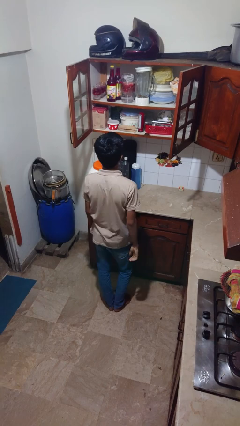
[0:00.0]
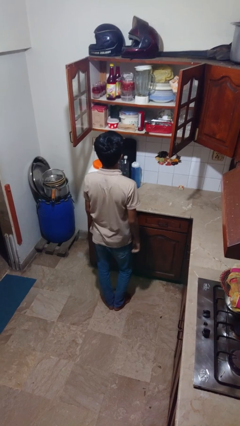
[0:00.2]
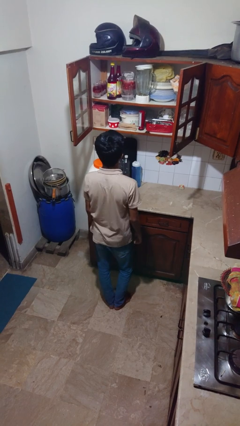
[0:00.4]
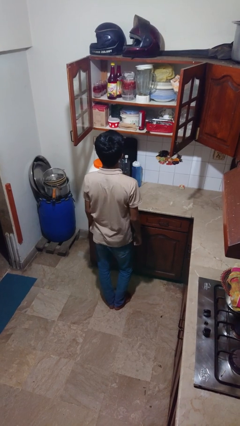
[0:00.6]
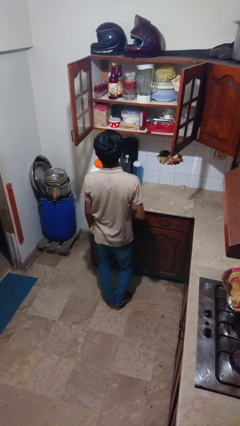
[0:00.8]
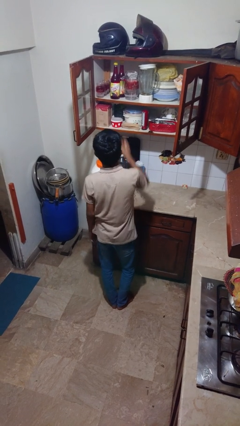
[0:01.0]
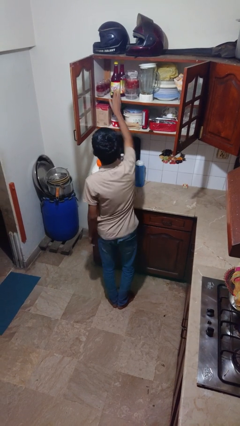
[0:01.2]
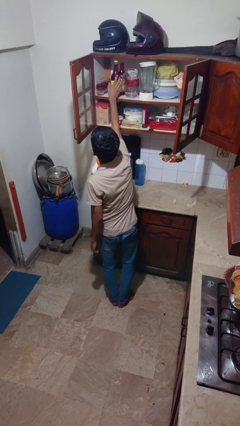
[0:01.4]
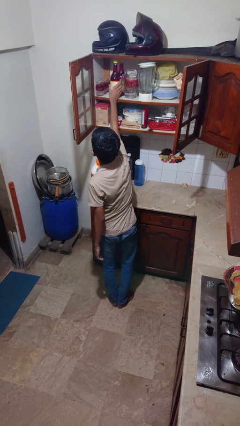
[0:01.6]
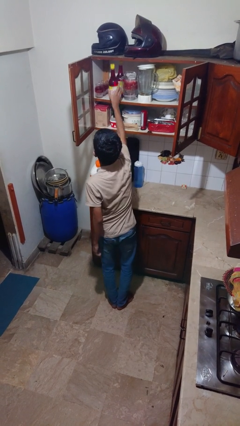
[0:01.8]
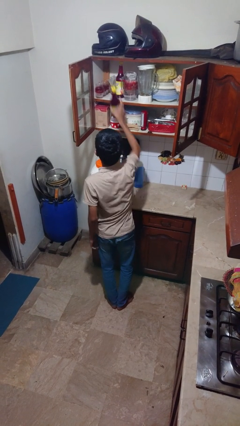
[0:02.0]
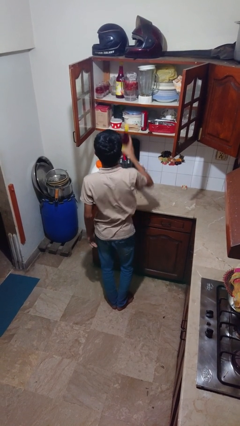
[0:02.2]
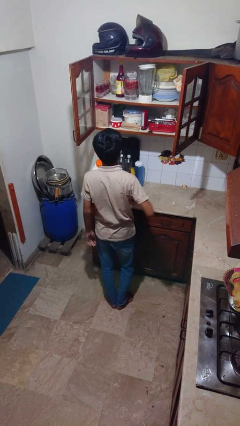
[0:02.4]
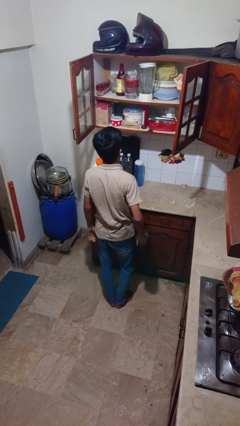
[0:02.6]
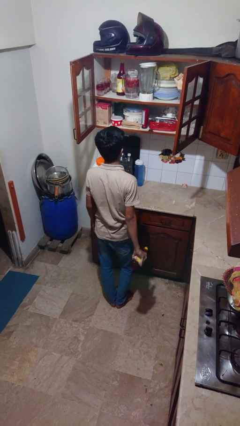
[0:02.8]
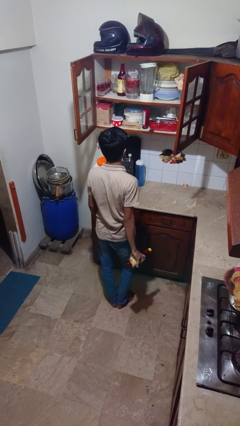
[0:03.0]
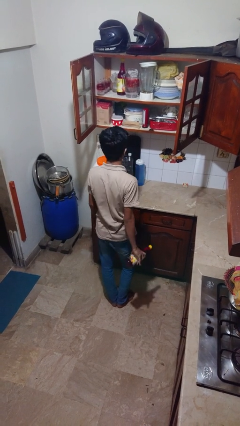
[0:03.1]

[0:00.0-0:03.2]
person picks up object from cabinet

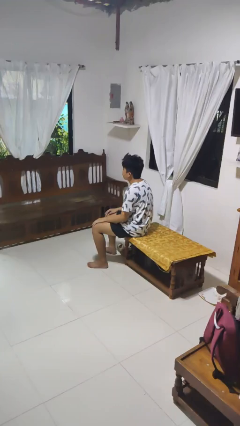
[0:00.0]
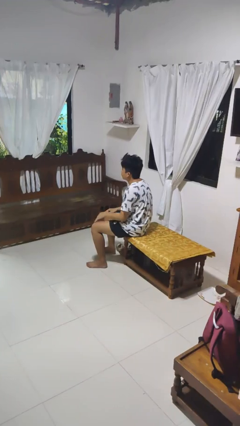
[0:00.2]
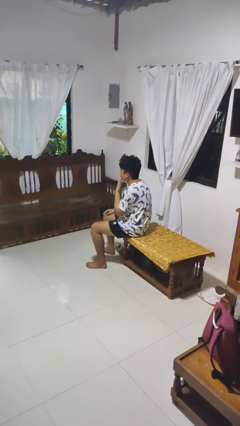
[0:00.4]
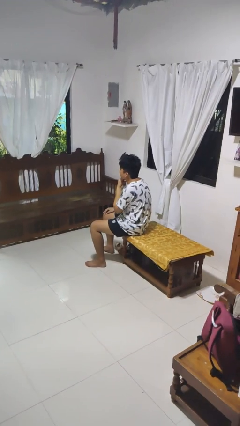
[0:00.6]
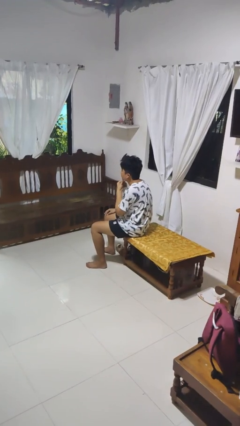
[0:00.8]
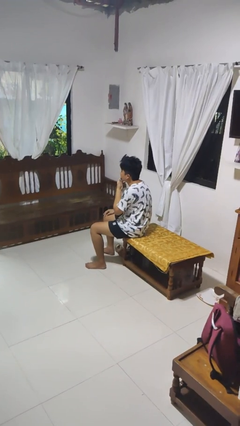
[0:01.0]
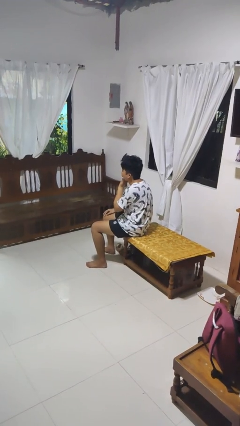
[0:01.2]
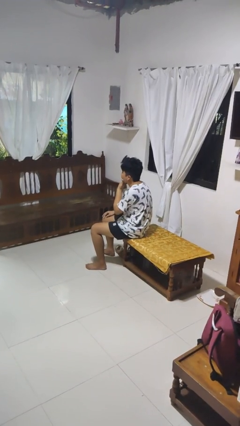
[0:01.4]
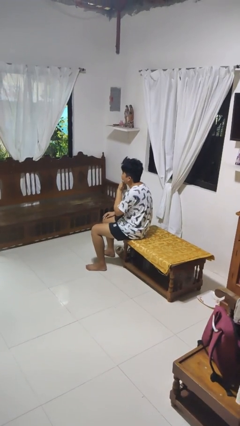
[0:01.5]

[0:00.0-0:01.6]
person strokes chin

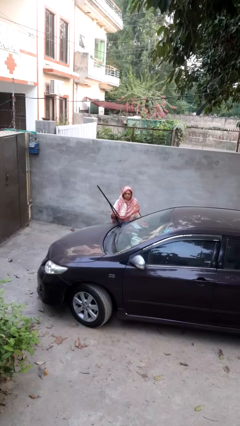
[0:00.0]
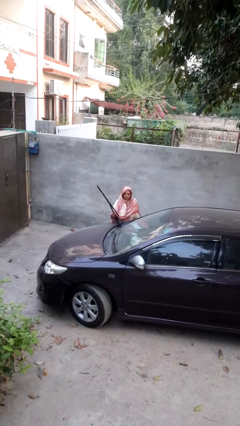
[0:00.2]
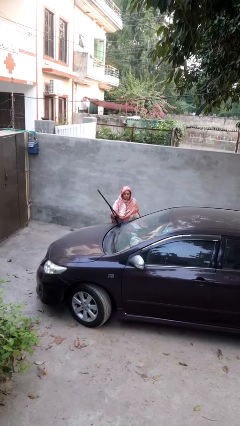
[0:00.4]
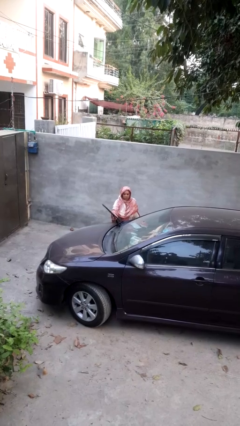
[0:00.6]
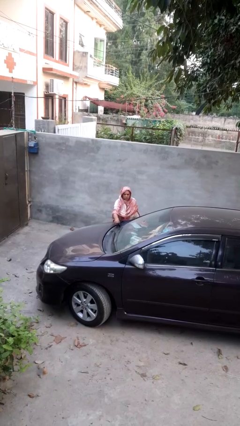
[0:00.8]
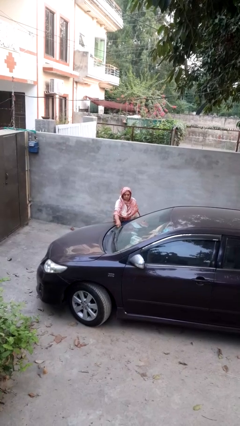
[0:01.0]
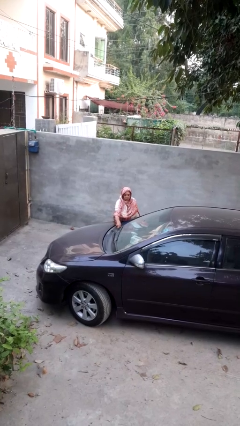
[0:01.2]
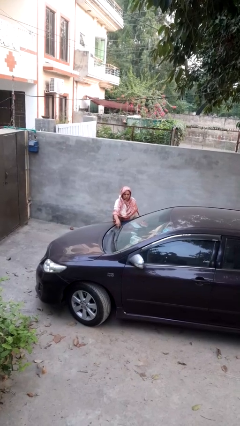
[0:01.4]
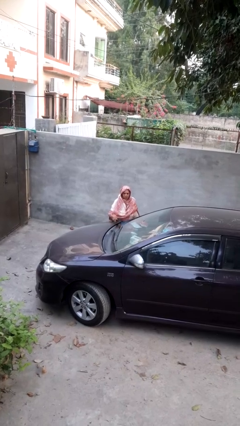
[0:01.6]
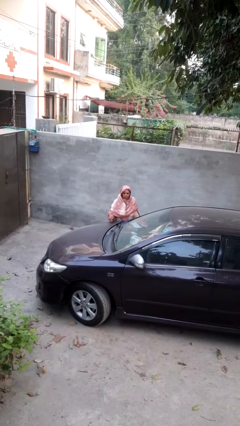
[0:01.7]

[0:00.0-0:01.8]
person flips down car wipers

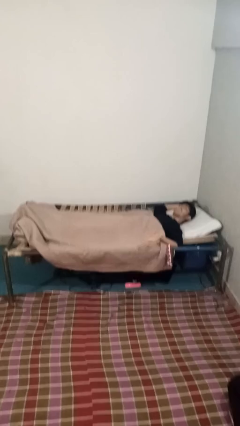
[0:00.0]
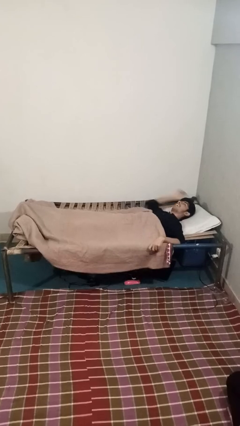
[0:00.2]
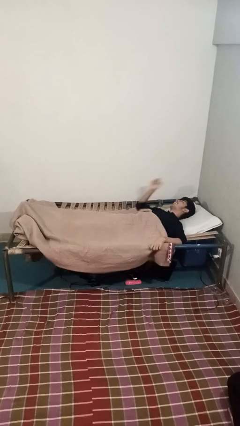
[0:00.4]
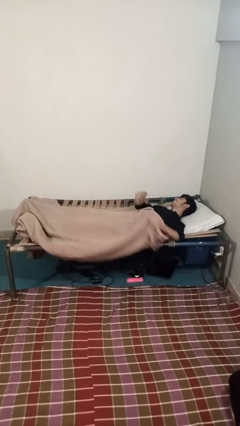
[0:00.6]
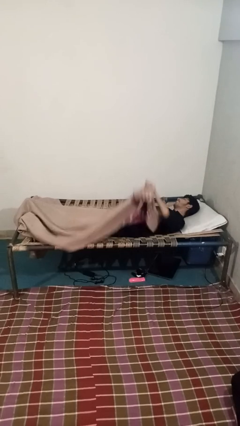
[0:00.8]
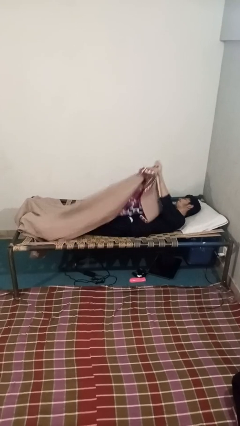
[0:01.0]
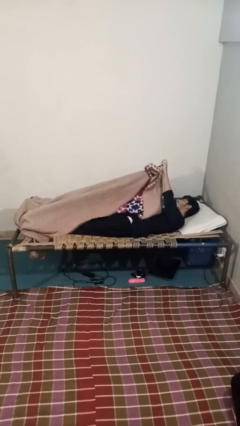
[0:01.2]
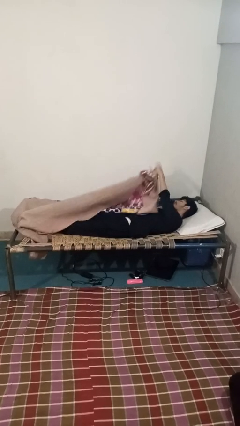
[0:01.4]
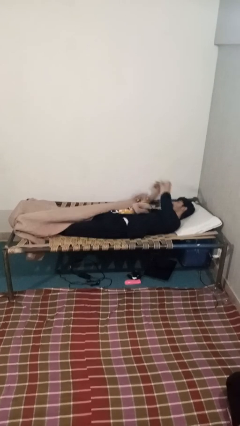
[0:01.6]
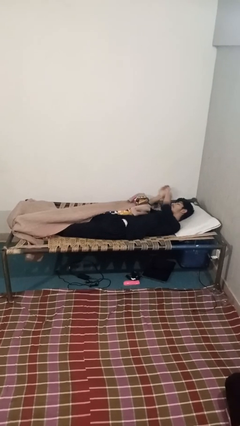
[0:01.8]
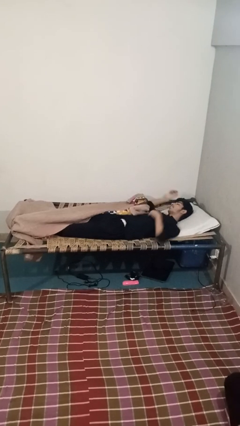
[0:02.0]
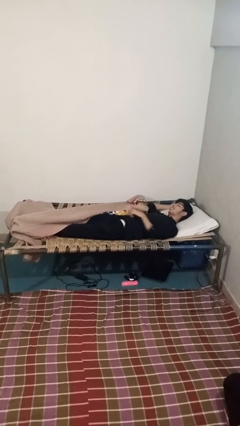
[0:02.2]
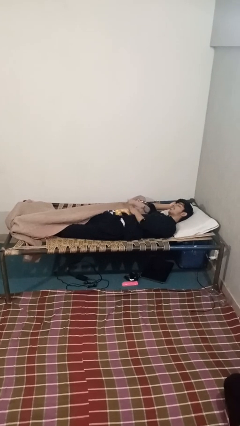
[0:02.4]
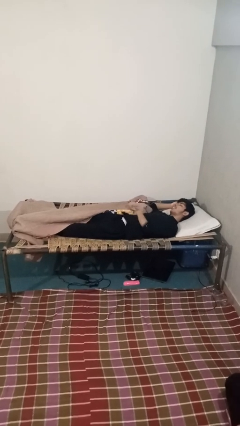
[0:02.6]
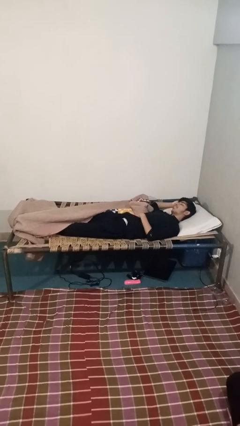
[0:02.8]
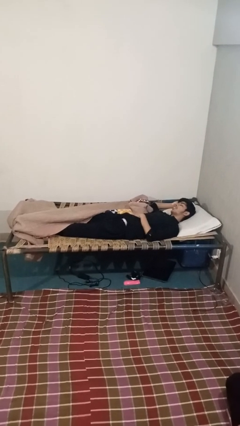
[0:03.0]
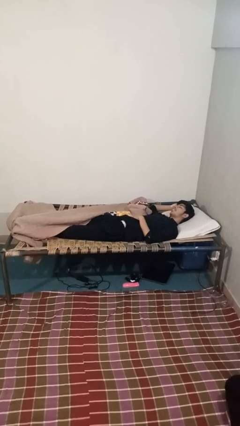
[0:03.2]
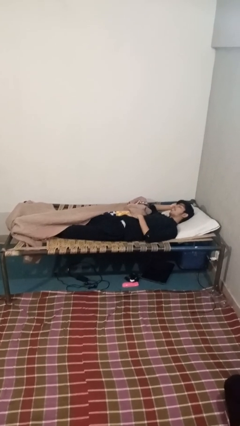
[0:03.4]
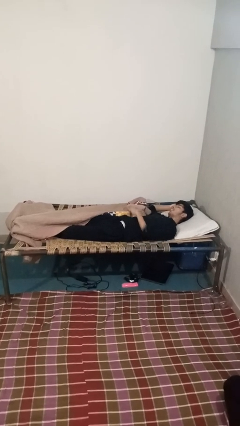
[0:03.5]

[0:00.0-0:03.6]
person uncovers with blanket

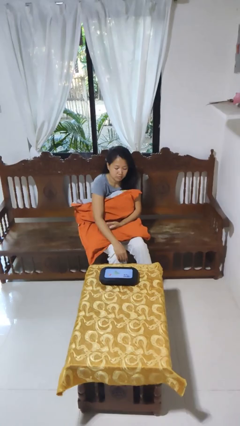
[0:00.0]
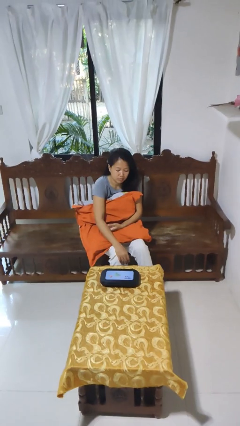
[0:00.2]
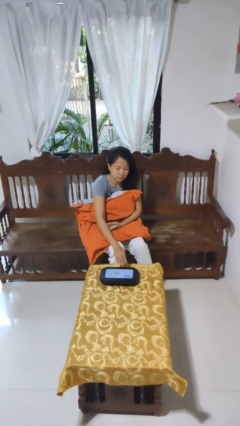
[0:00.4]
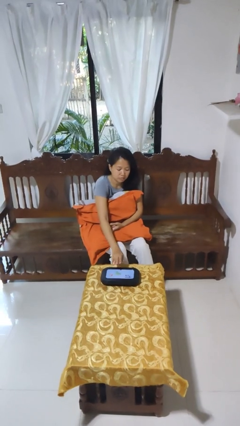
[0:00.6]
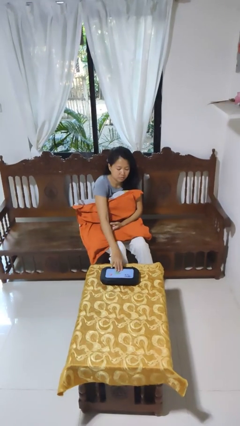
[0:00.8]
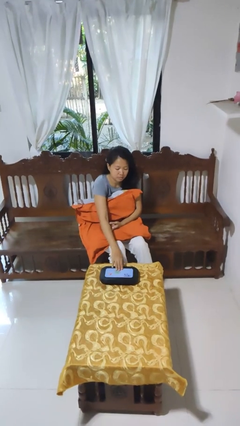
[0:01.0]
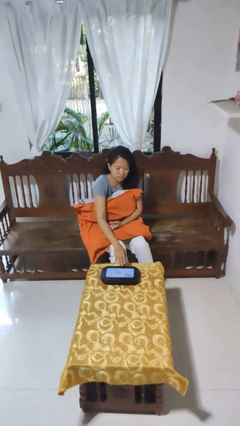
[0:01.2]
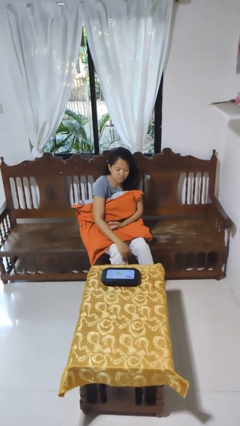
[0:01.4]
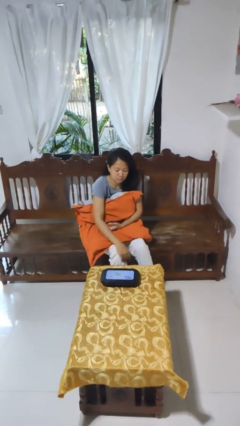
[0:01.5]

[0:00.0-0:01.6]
person taps object with finger

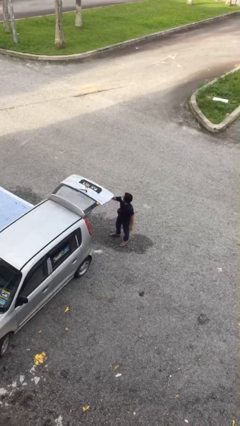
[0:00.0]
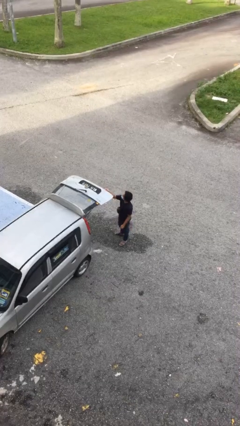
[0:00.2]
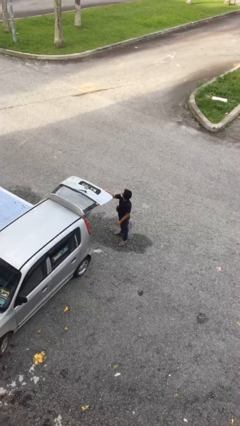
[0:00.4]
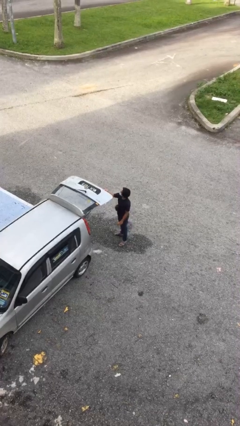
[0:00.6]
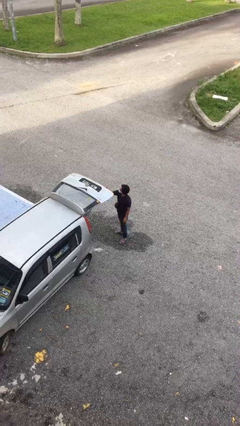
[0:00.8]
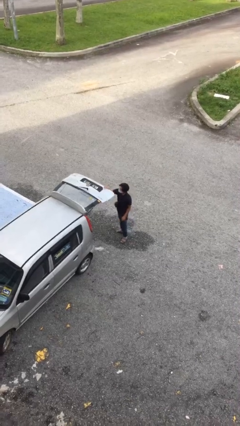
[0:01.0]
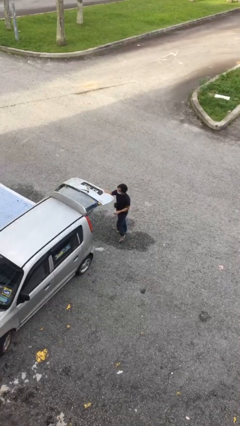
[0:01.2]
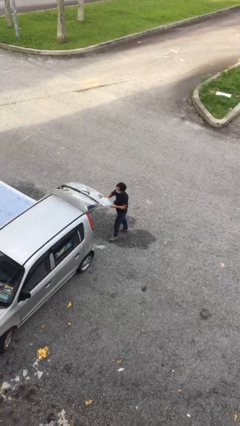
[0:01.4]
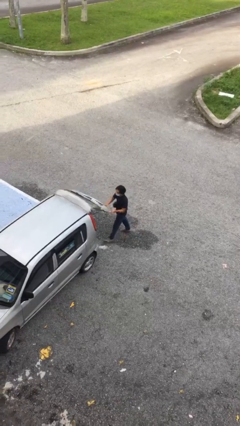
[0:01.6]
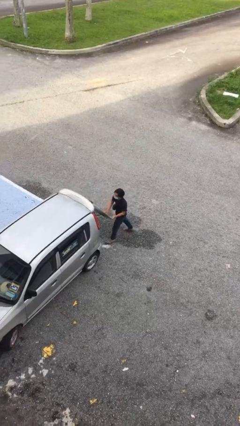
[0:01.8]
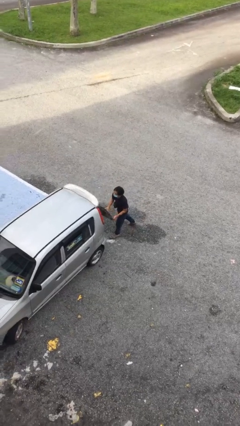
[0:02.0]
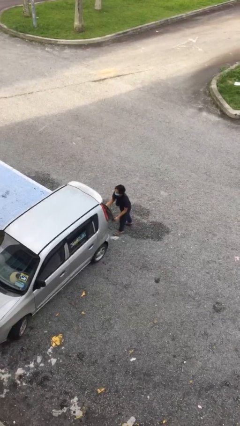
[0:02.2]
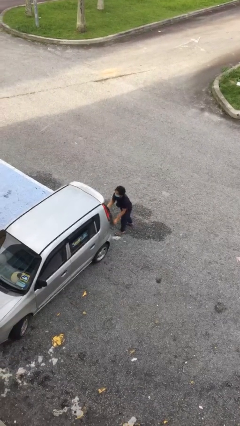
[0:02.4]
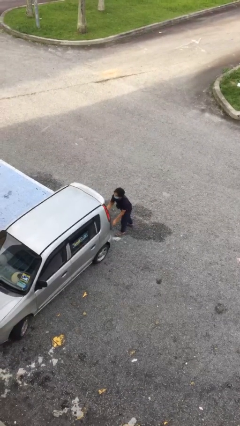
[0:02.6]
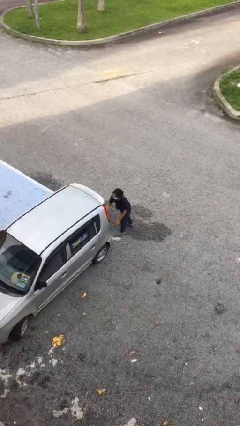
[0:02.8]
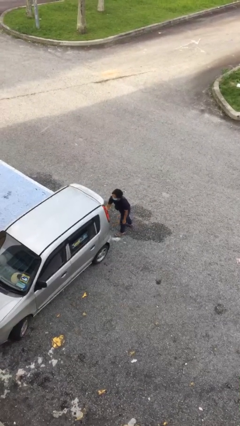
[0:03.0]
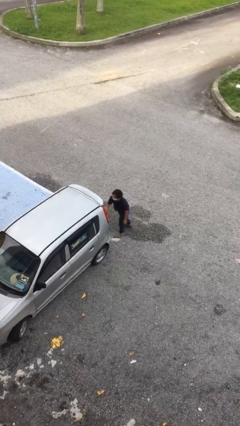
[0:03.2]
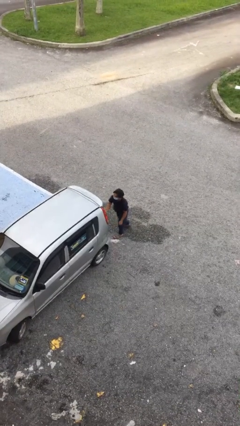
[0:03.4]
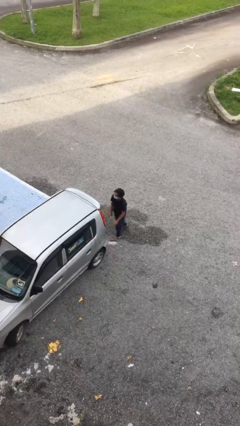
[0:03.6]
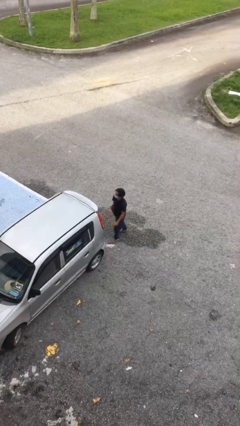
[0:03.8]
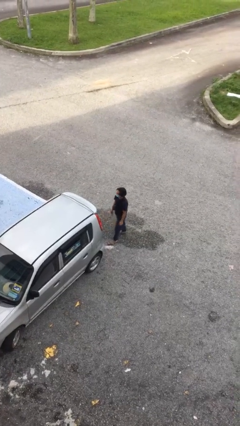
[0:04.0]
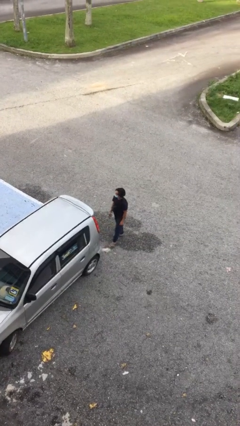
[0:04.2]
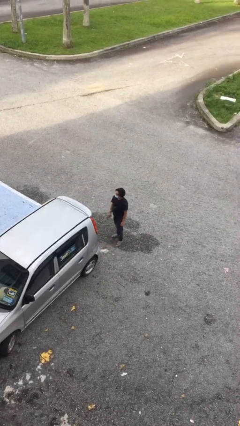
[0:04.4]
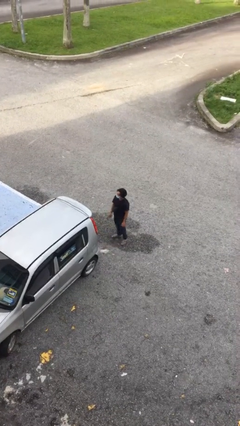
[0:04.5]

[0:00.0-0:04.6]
person closes car trunk

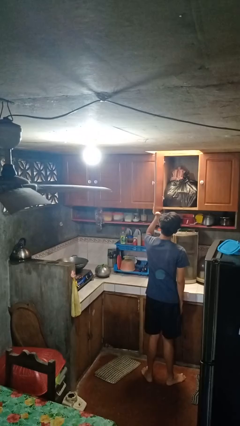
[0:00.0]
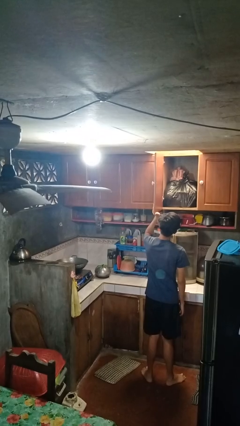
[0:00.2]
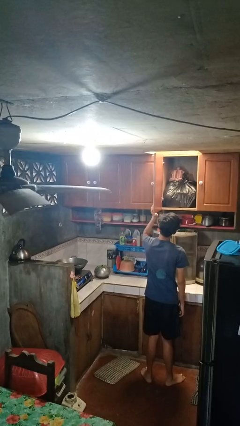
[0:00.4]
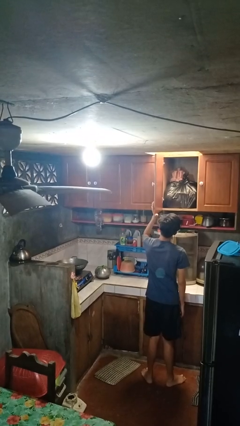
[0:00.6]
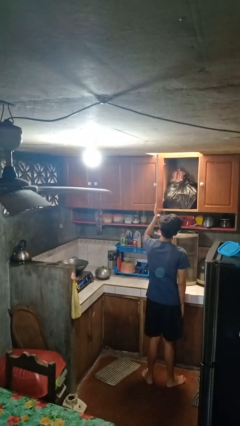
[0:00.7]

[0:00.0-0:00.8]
person closes cabinet

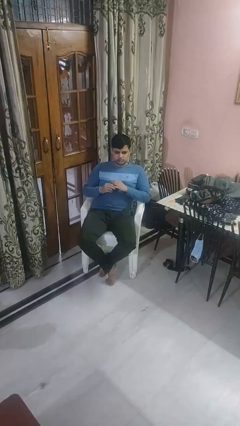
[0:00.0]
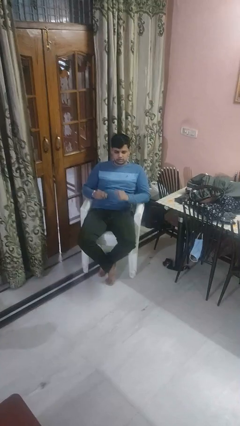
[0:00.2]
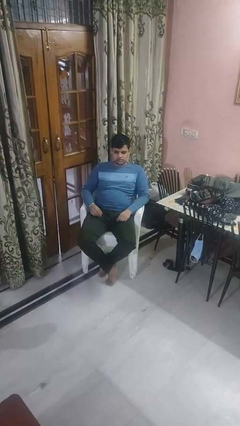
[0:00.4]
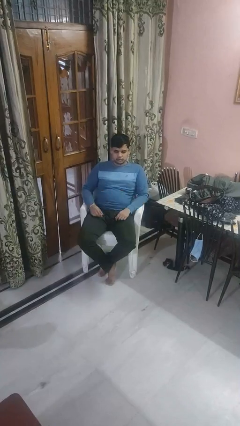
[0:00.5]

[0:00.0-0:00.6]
person takes off ring
